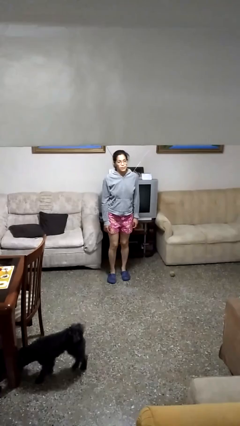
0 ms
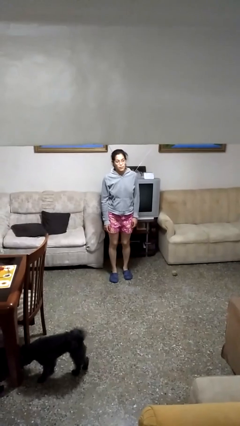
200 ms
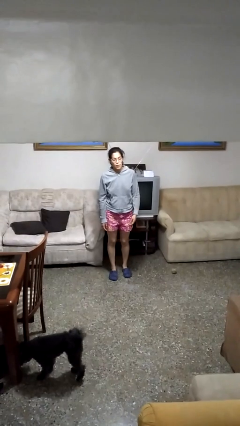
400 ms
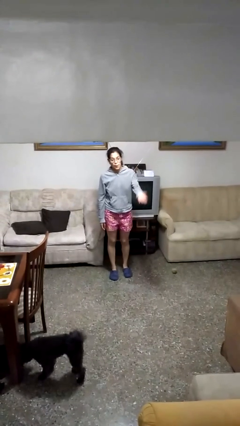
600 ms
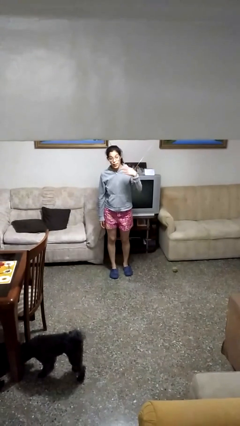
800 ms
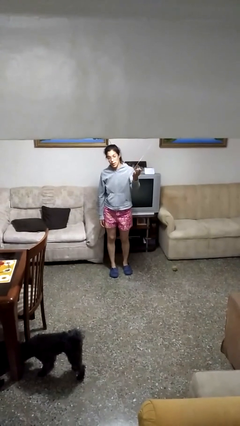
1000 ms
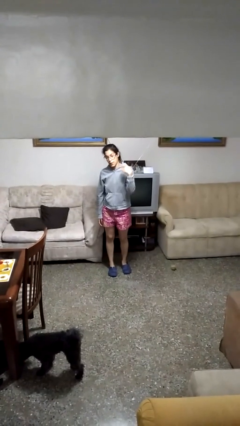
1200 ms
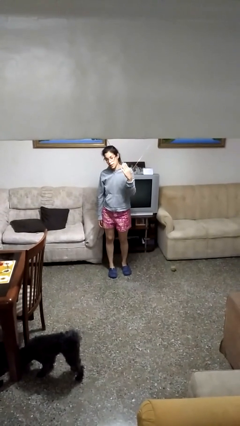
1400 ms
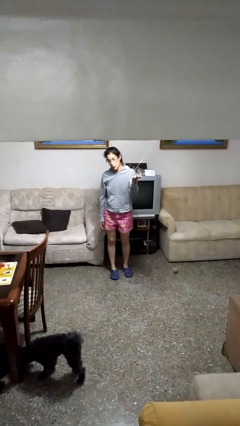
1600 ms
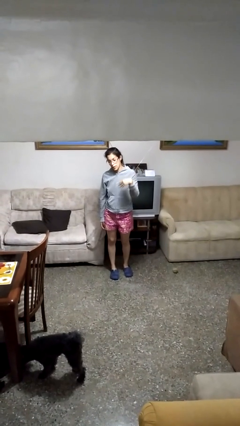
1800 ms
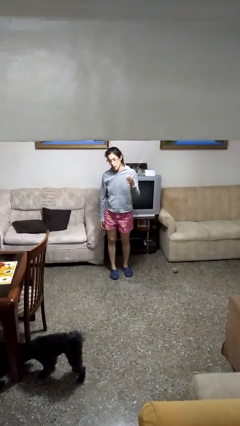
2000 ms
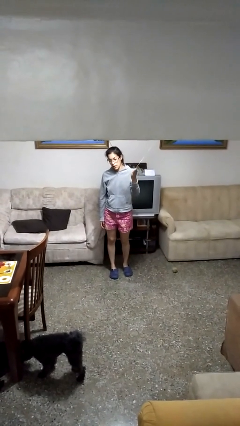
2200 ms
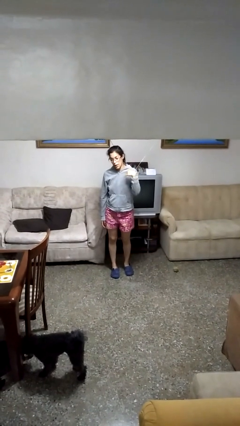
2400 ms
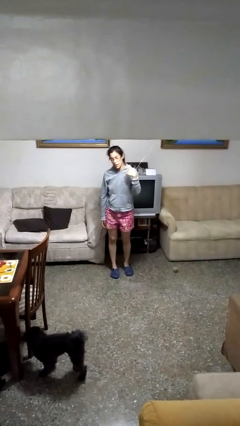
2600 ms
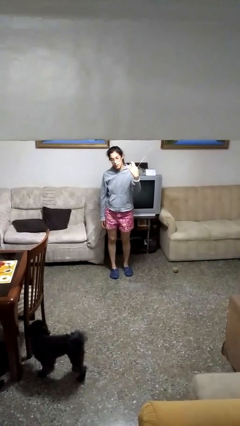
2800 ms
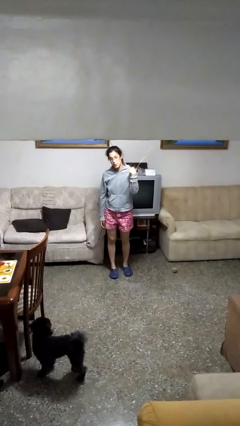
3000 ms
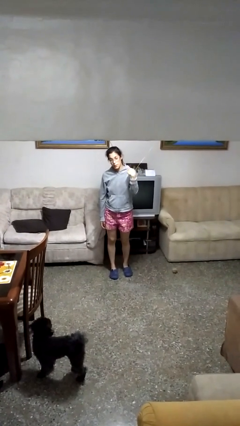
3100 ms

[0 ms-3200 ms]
person gestures come here

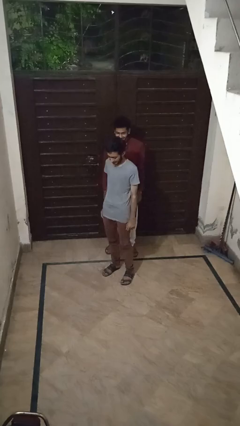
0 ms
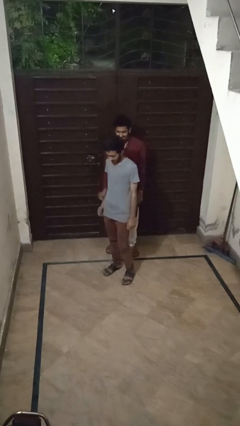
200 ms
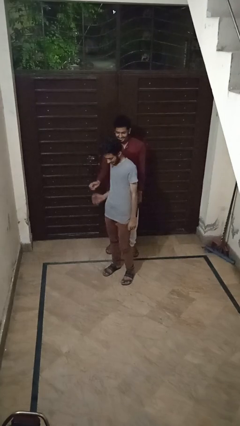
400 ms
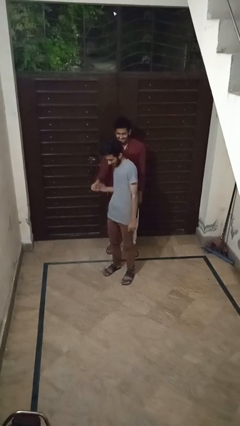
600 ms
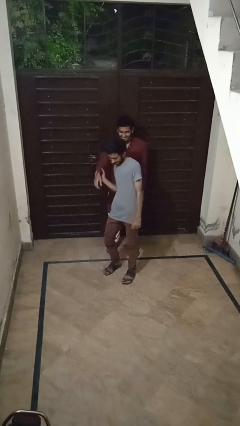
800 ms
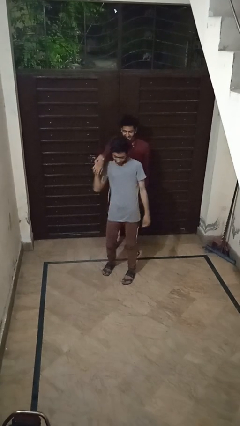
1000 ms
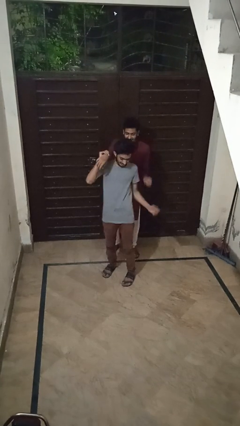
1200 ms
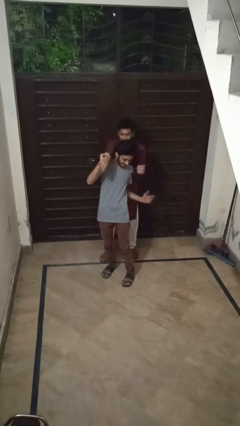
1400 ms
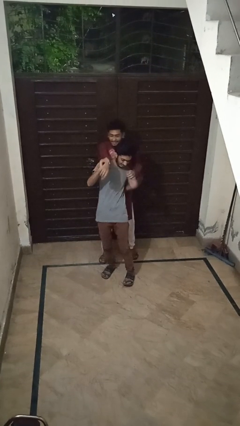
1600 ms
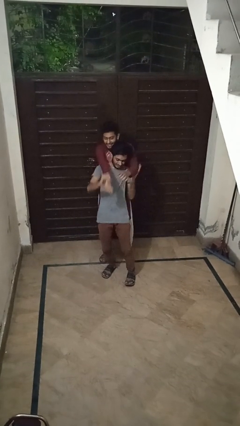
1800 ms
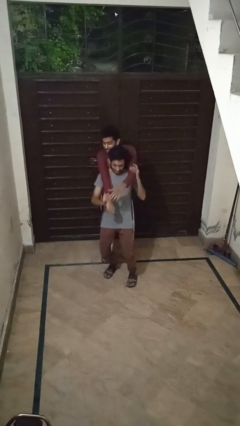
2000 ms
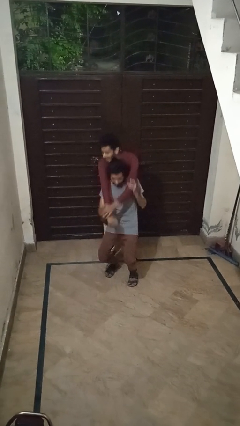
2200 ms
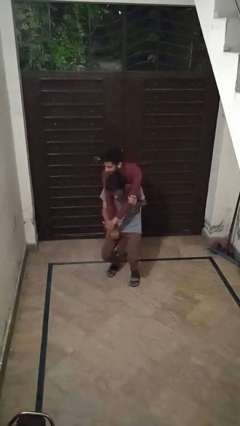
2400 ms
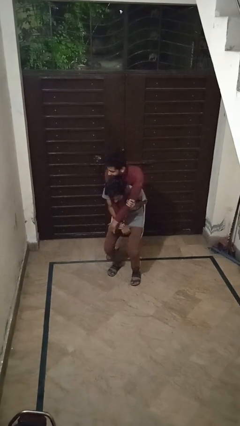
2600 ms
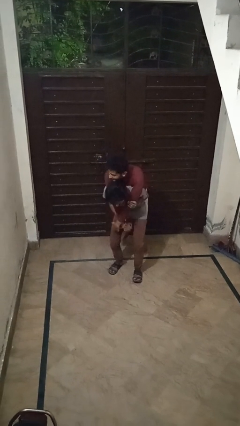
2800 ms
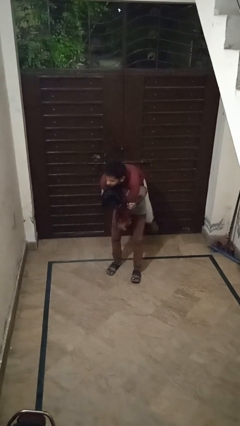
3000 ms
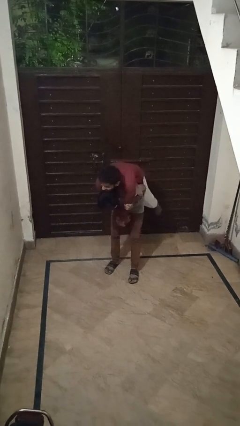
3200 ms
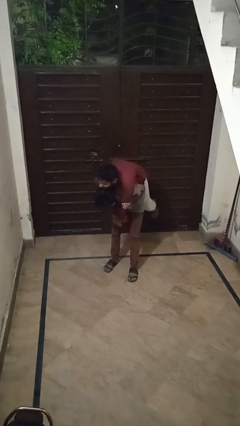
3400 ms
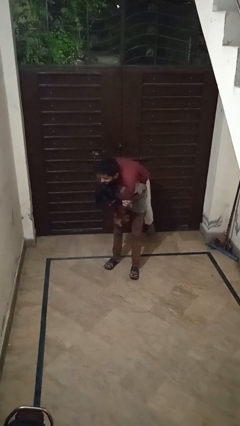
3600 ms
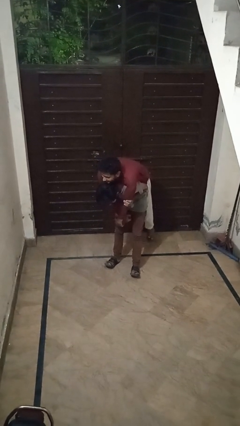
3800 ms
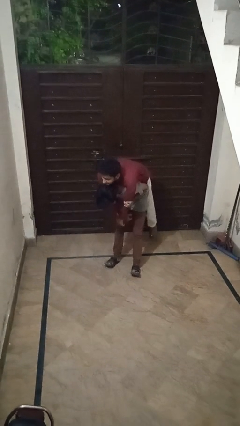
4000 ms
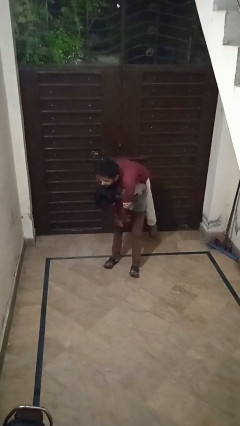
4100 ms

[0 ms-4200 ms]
person carries person over shoulder

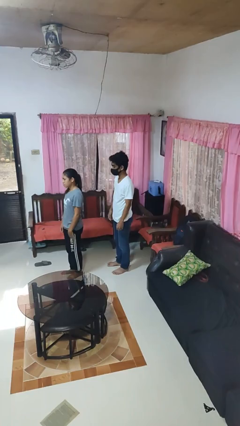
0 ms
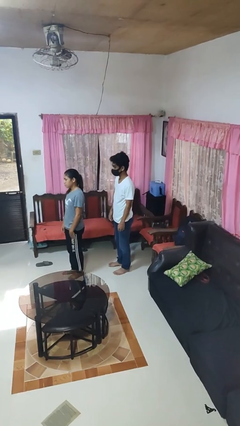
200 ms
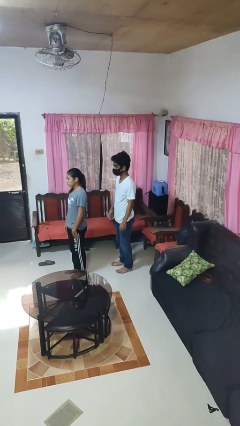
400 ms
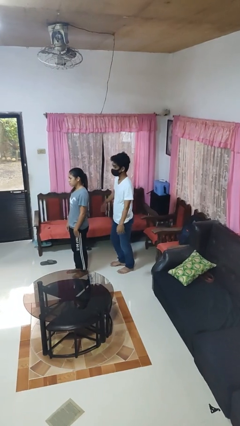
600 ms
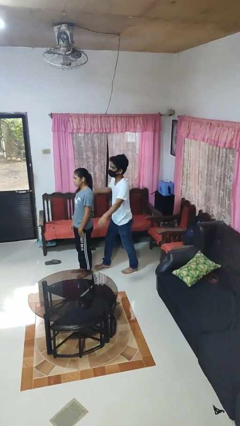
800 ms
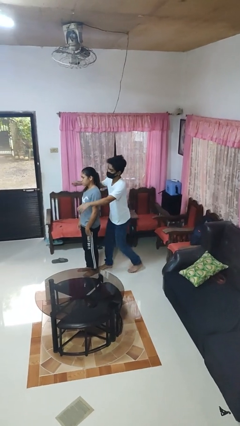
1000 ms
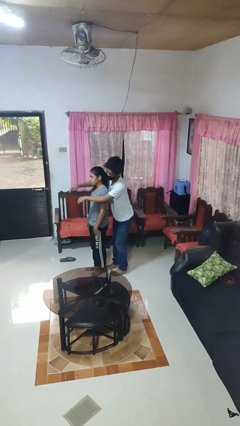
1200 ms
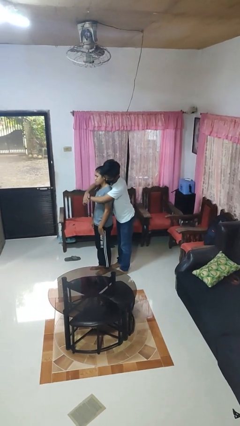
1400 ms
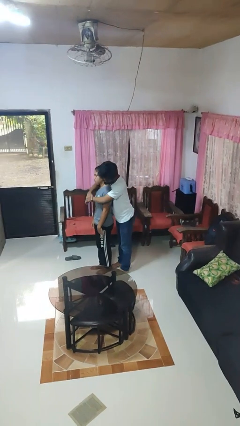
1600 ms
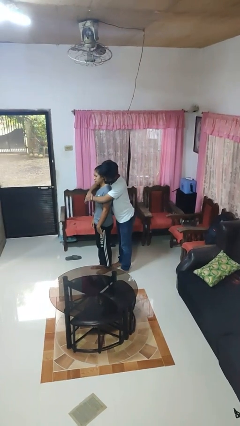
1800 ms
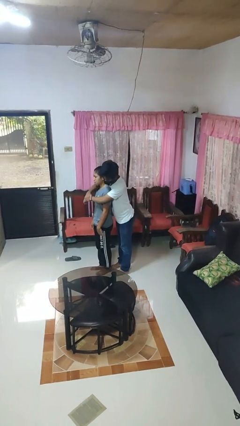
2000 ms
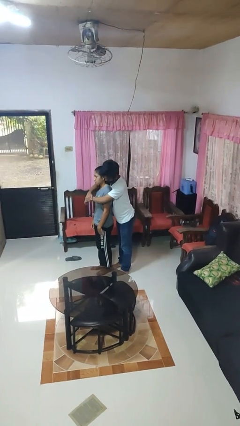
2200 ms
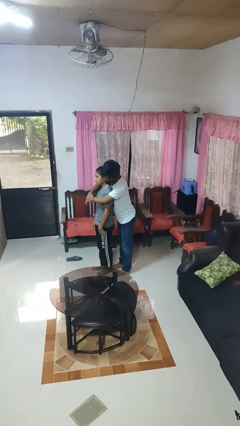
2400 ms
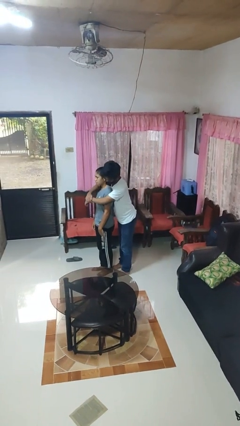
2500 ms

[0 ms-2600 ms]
person hugs person from behind

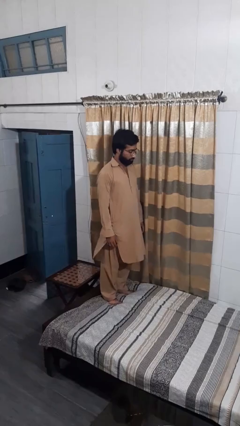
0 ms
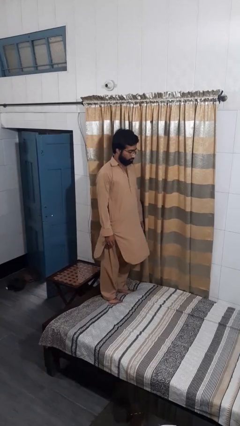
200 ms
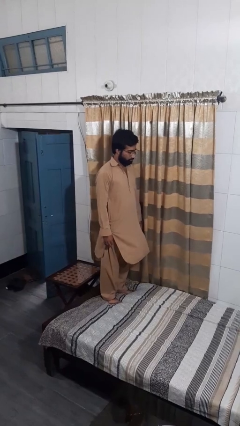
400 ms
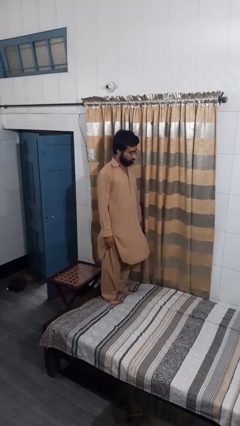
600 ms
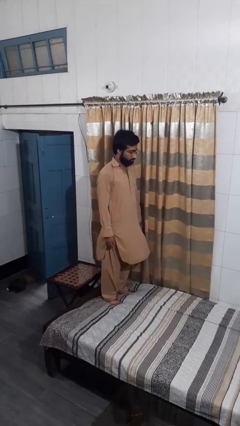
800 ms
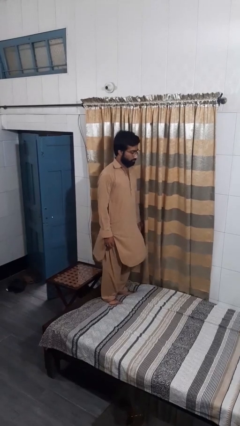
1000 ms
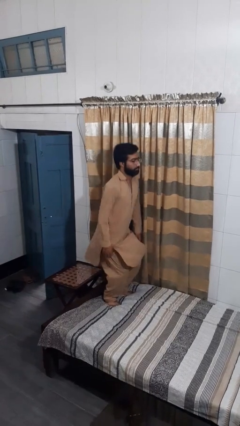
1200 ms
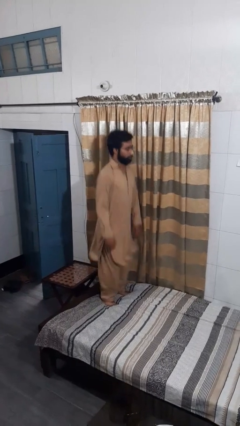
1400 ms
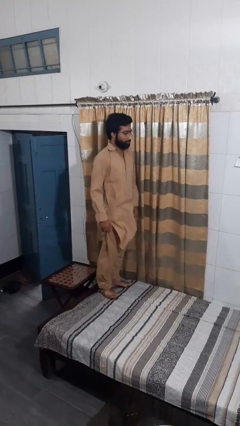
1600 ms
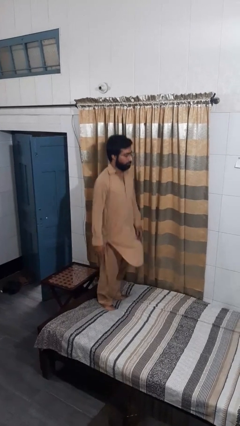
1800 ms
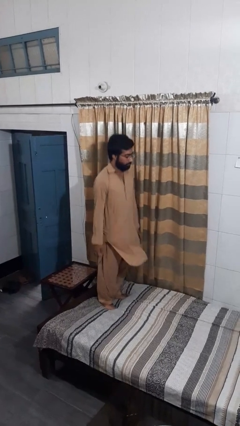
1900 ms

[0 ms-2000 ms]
person jumps on bed

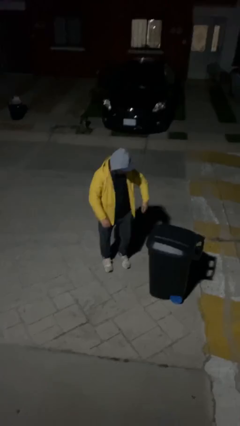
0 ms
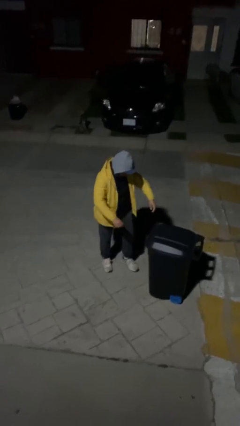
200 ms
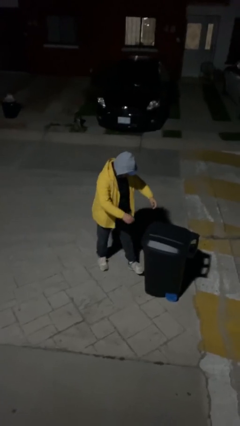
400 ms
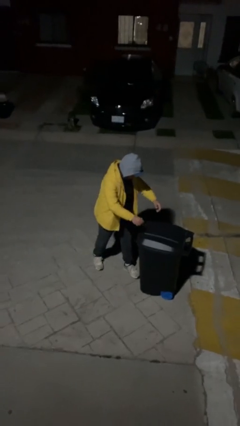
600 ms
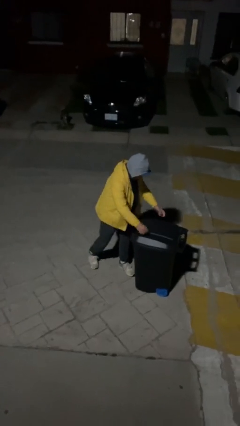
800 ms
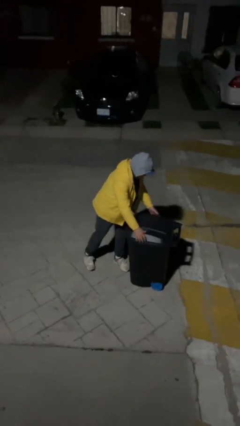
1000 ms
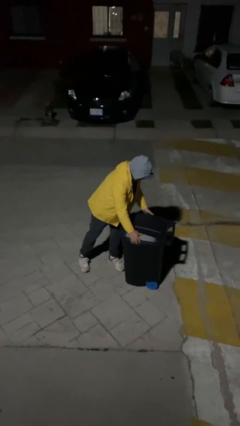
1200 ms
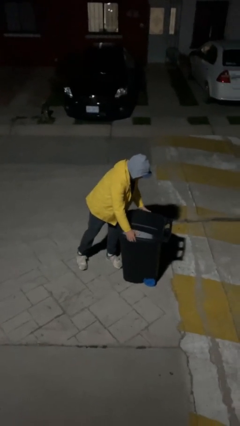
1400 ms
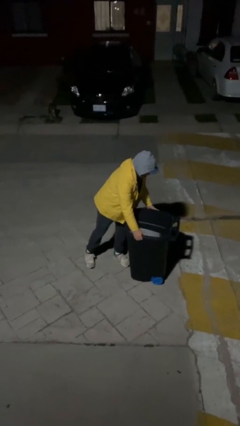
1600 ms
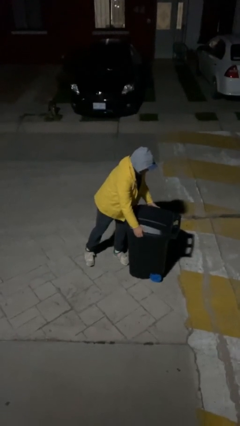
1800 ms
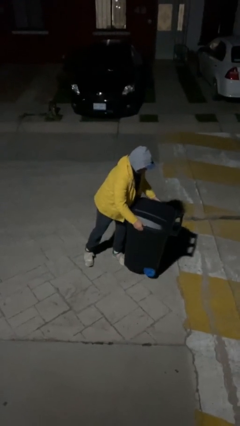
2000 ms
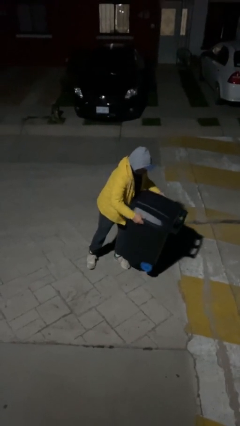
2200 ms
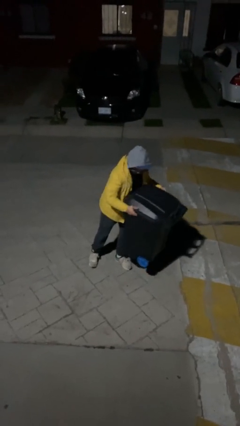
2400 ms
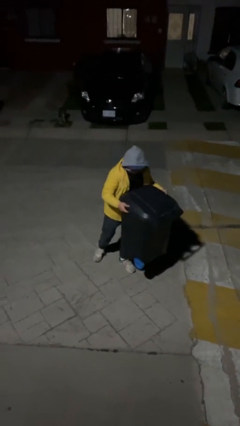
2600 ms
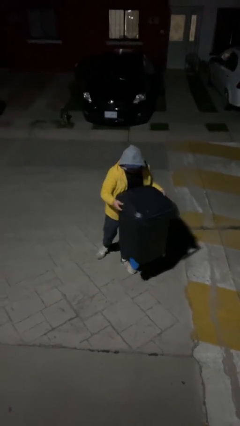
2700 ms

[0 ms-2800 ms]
person picks up object from floor

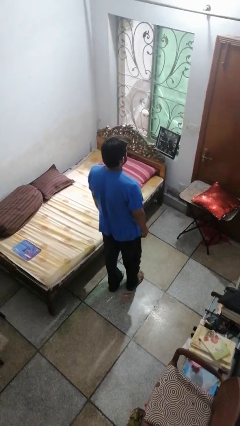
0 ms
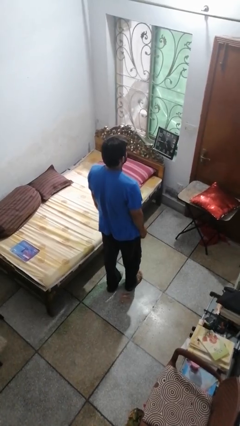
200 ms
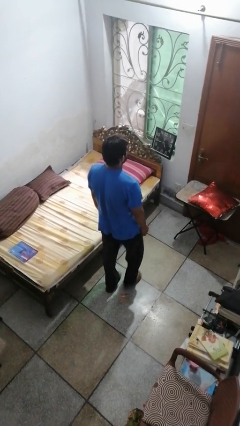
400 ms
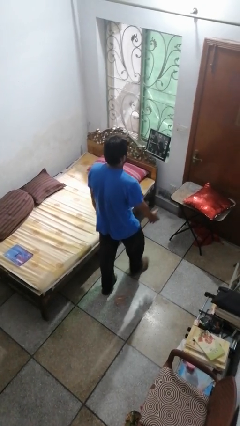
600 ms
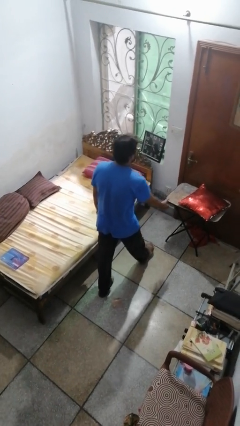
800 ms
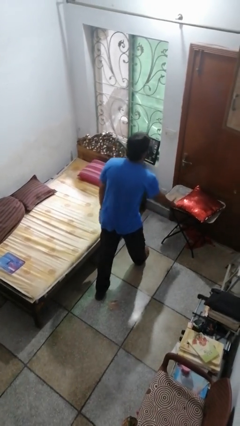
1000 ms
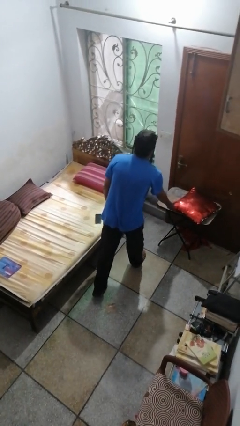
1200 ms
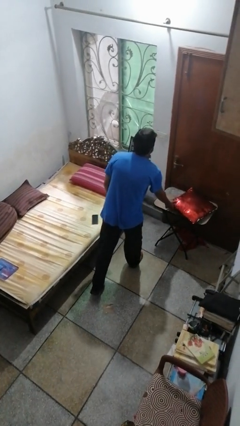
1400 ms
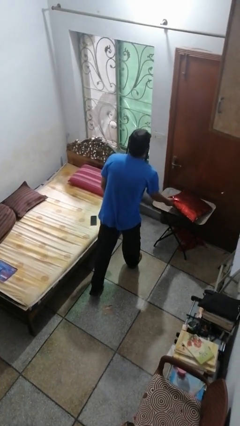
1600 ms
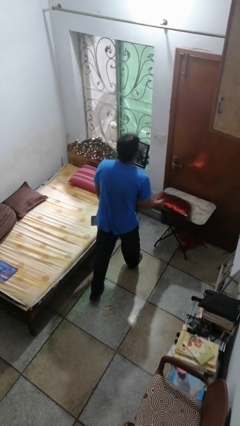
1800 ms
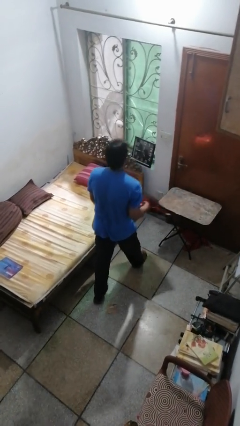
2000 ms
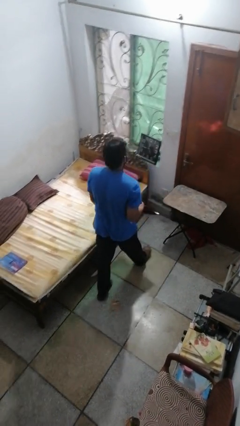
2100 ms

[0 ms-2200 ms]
person picks up object from table

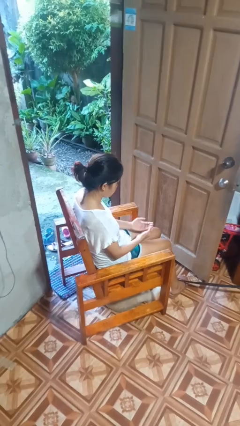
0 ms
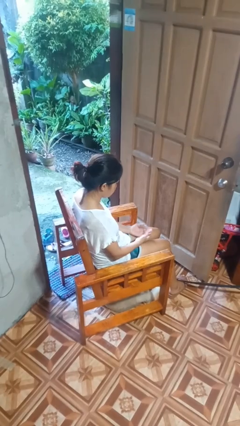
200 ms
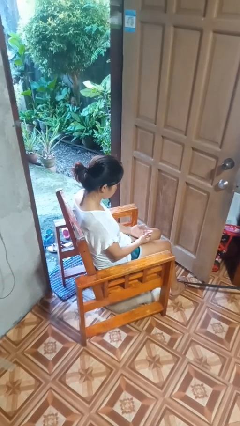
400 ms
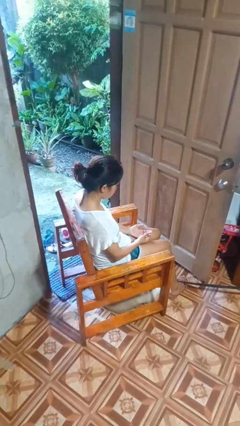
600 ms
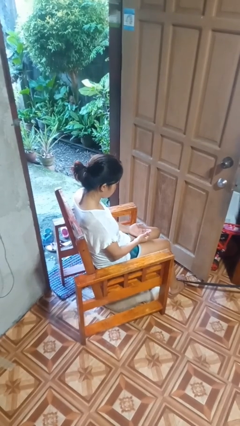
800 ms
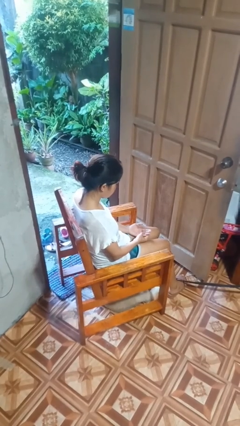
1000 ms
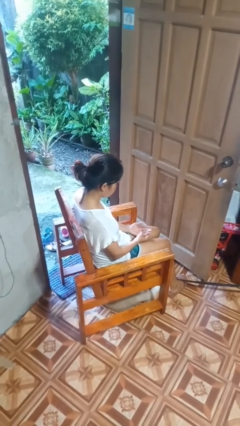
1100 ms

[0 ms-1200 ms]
person looks at hands in lap
